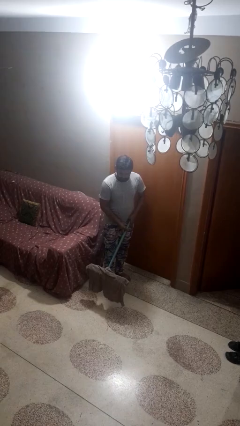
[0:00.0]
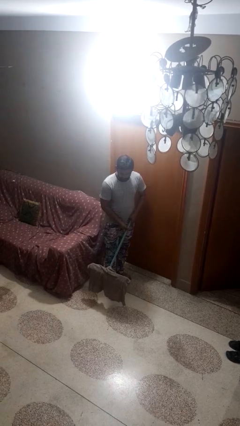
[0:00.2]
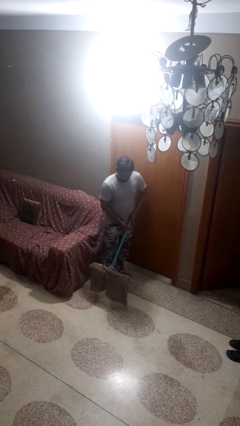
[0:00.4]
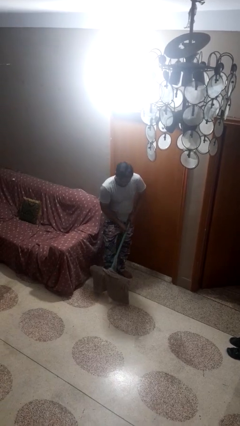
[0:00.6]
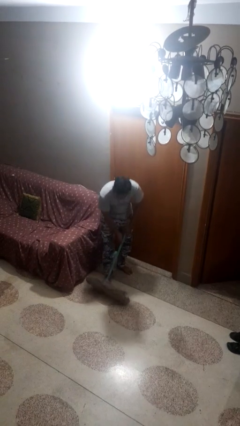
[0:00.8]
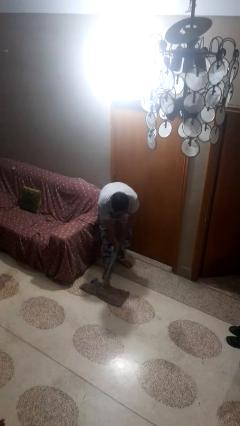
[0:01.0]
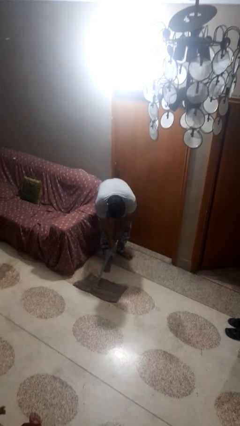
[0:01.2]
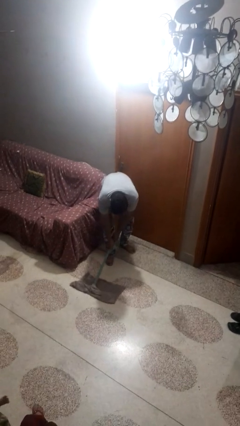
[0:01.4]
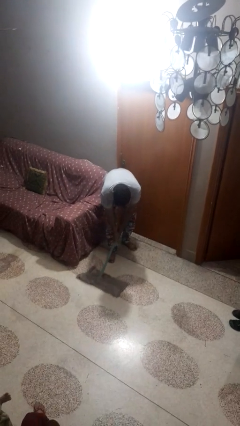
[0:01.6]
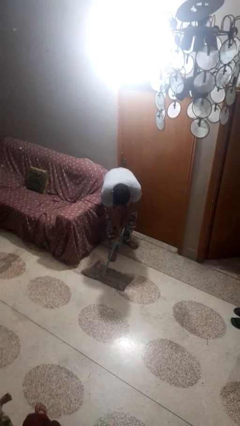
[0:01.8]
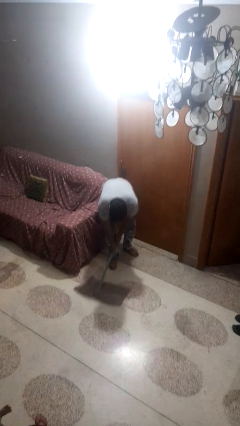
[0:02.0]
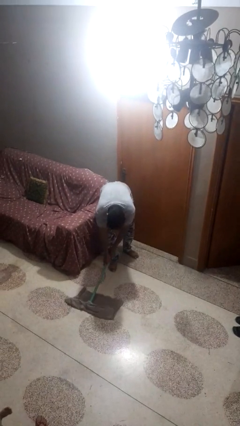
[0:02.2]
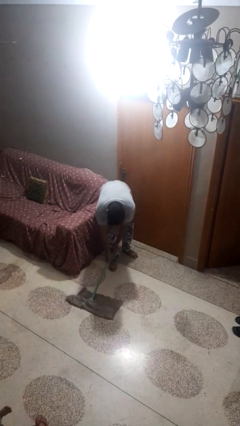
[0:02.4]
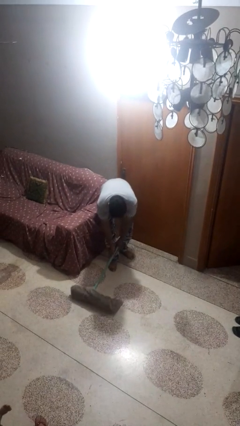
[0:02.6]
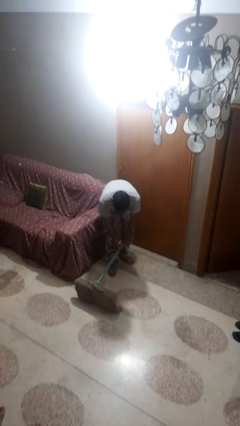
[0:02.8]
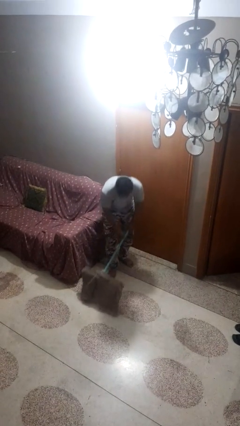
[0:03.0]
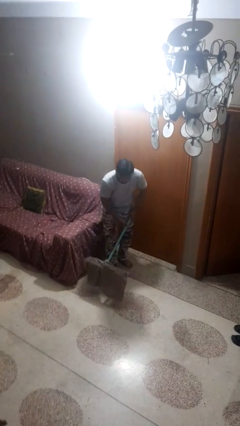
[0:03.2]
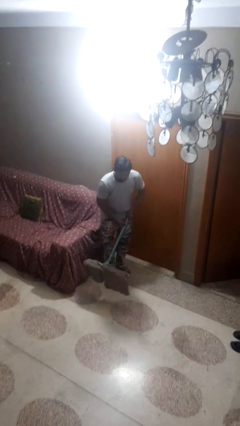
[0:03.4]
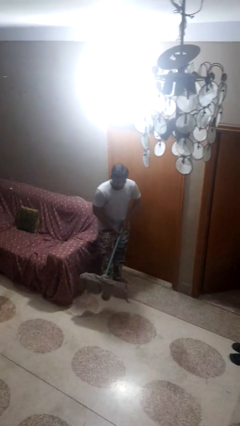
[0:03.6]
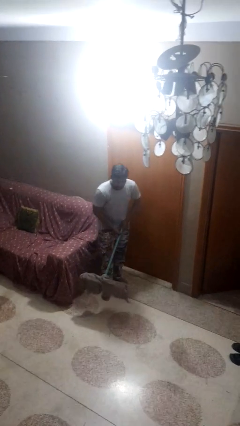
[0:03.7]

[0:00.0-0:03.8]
person mops

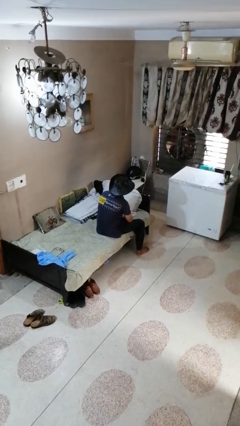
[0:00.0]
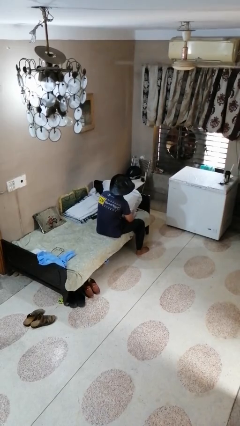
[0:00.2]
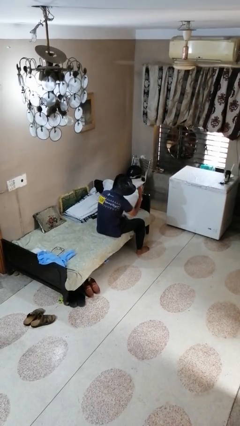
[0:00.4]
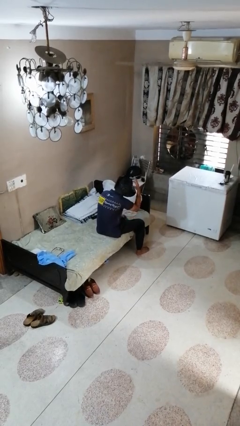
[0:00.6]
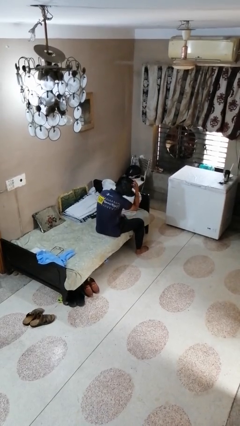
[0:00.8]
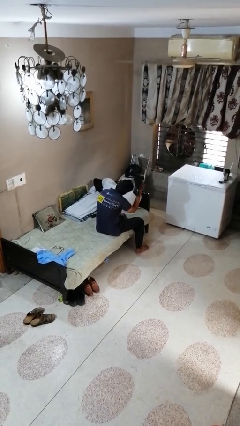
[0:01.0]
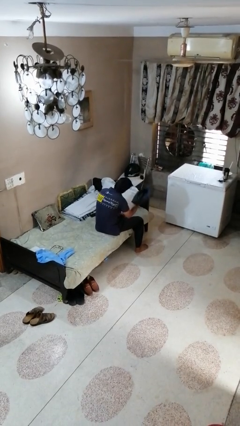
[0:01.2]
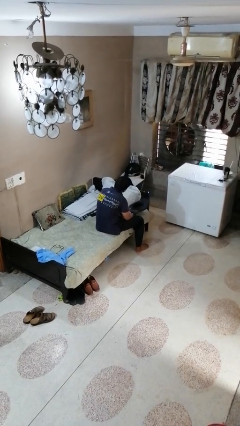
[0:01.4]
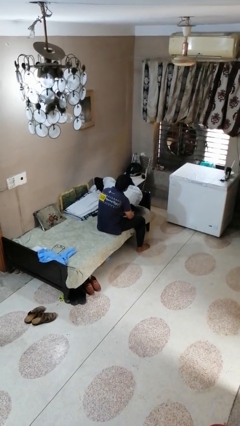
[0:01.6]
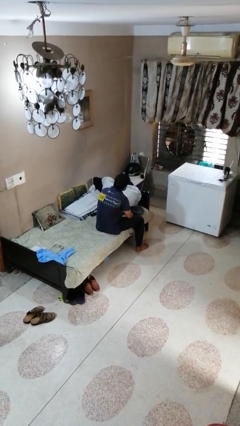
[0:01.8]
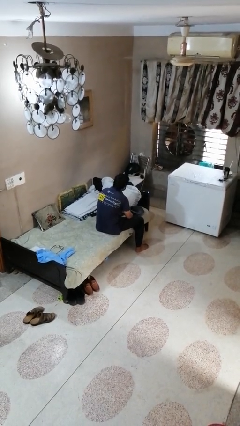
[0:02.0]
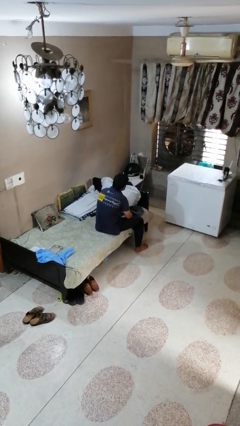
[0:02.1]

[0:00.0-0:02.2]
person takes off hat

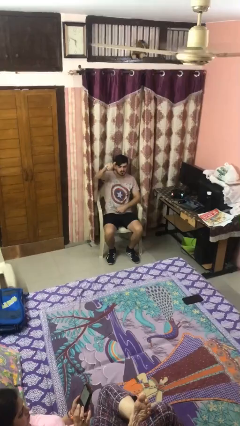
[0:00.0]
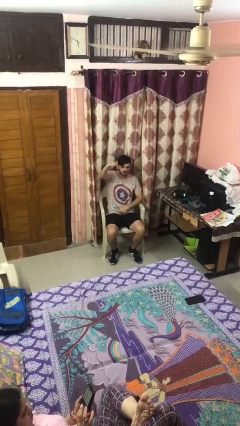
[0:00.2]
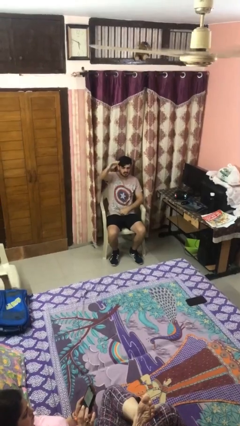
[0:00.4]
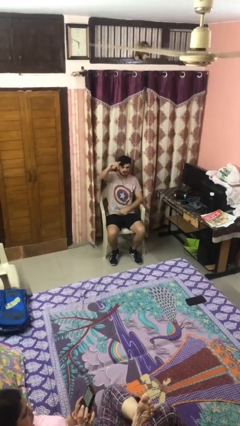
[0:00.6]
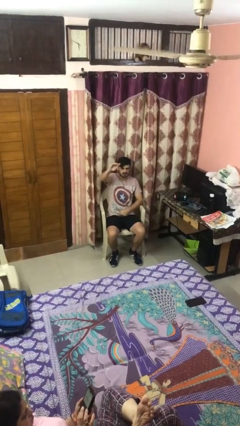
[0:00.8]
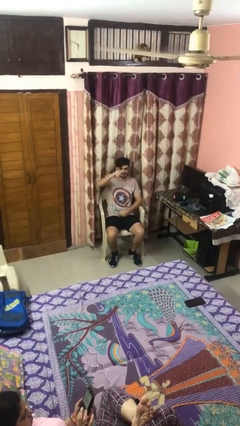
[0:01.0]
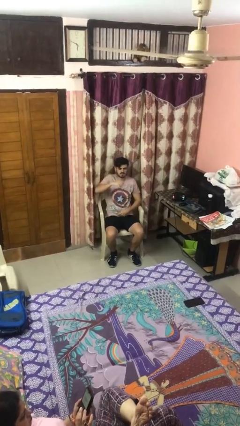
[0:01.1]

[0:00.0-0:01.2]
person gestures come here

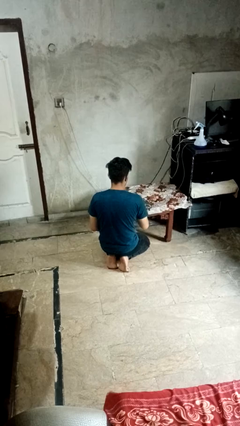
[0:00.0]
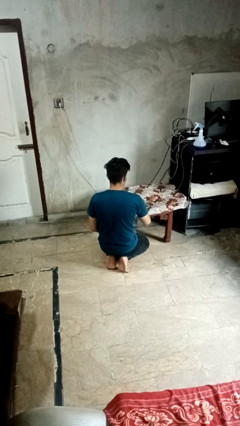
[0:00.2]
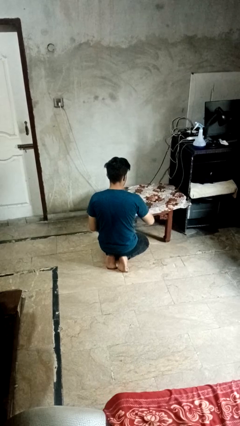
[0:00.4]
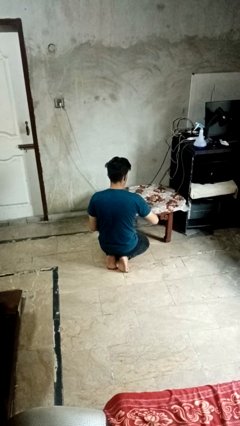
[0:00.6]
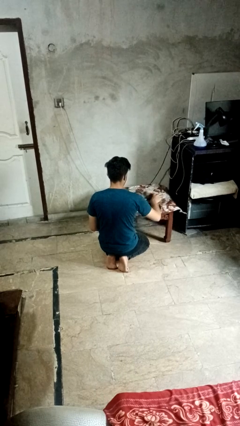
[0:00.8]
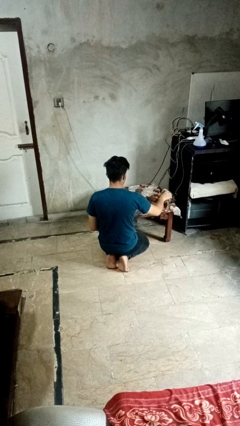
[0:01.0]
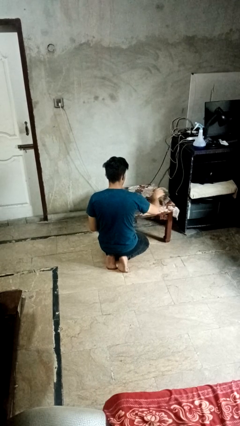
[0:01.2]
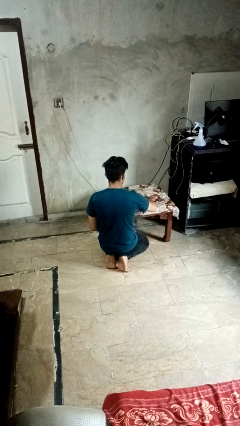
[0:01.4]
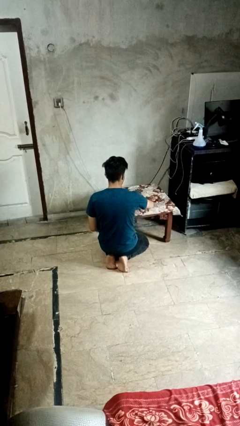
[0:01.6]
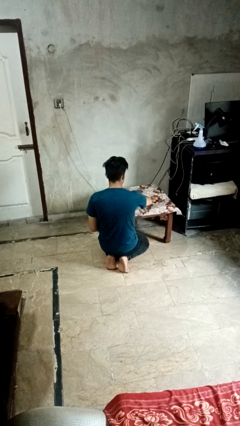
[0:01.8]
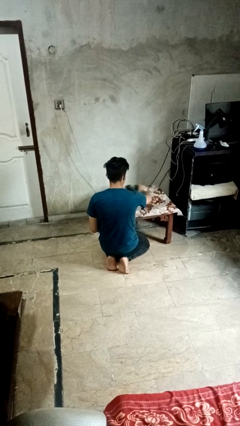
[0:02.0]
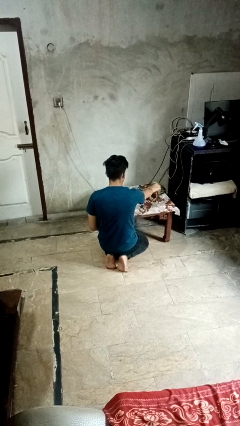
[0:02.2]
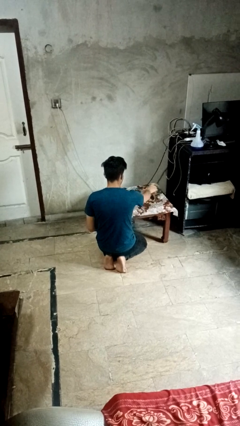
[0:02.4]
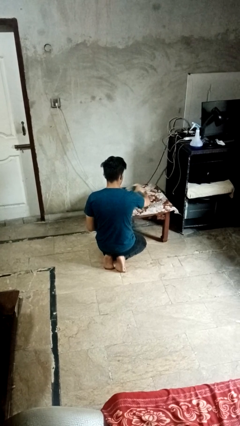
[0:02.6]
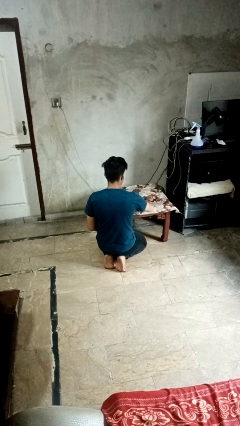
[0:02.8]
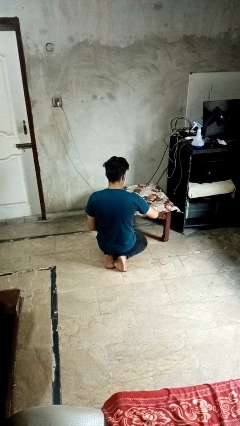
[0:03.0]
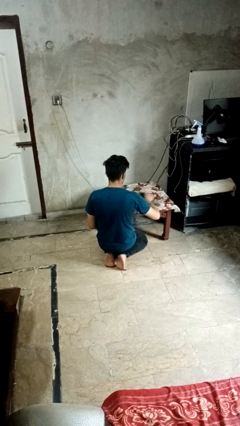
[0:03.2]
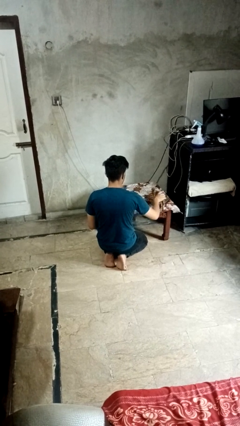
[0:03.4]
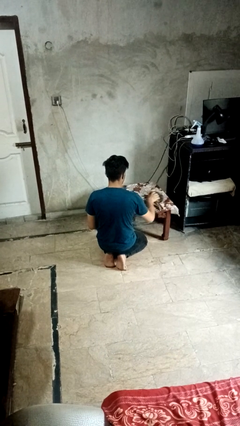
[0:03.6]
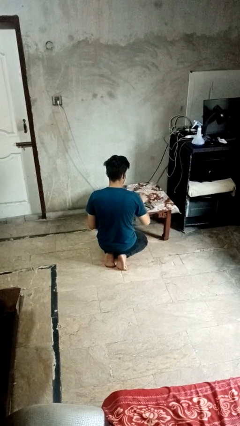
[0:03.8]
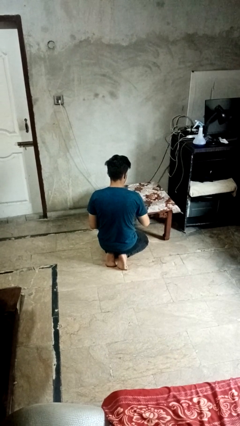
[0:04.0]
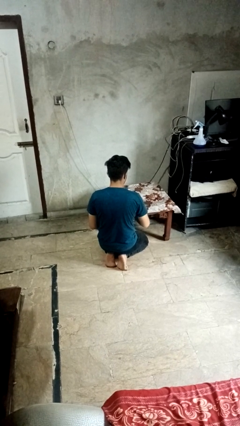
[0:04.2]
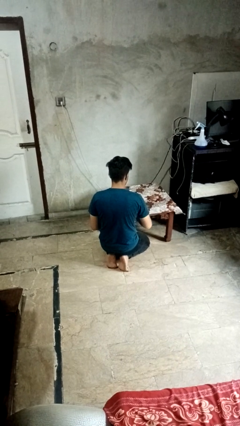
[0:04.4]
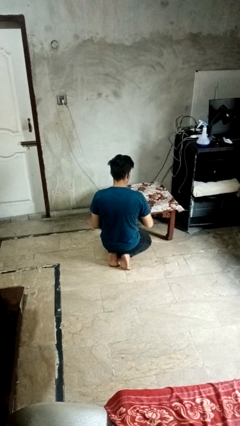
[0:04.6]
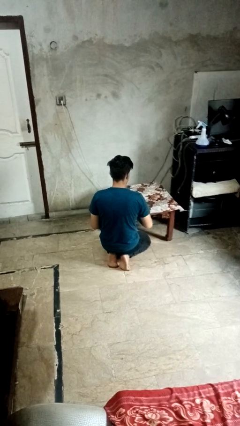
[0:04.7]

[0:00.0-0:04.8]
person cleans table with rag

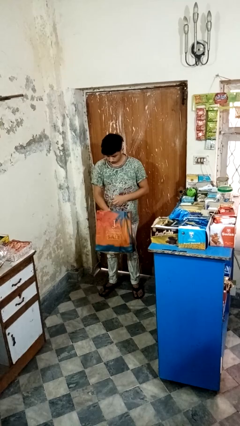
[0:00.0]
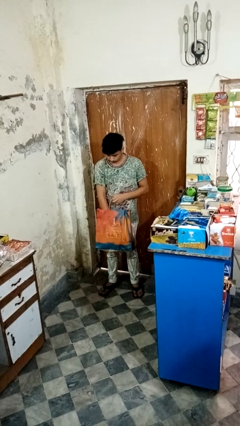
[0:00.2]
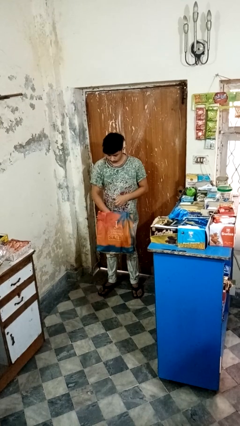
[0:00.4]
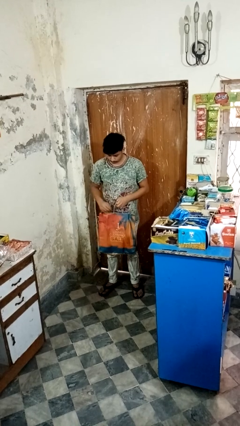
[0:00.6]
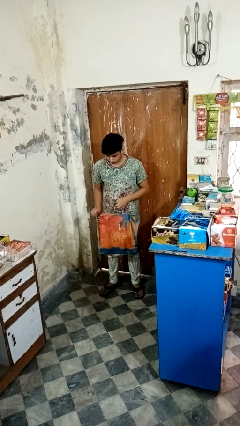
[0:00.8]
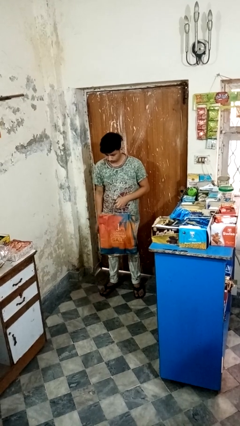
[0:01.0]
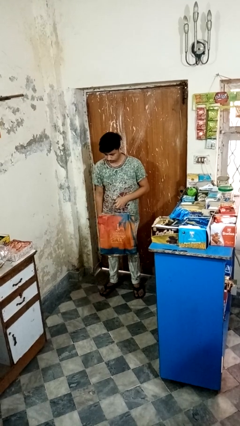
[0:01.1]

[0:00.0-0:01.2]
person puts object into bag

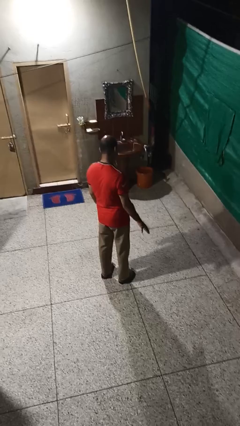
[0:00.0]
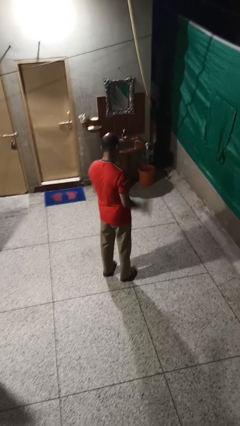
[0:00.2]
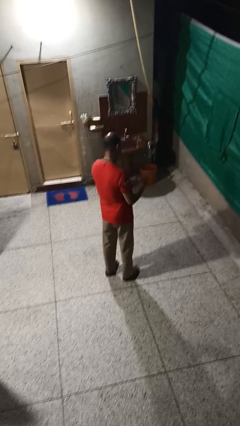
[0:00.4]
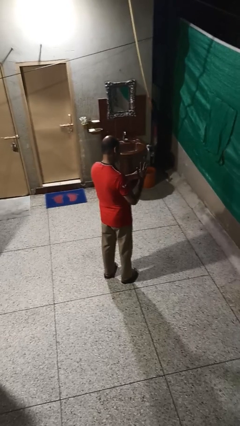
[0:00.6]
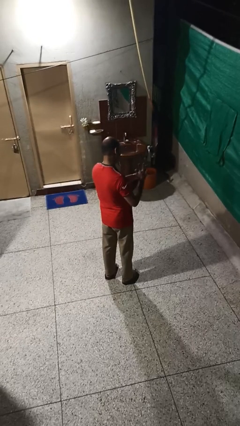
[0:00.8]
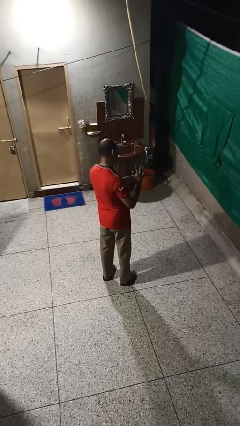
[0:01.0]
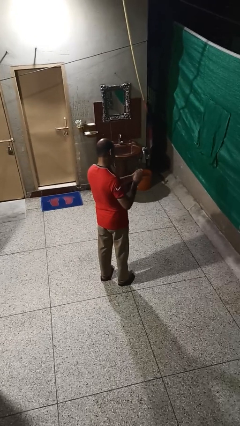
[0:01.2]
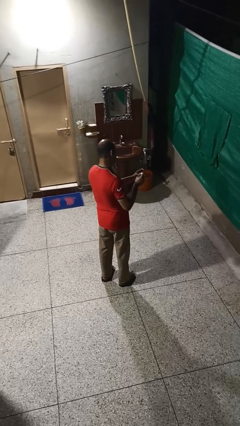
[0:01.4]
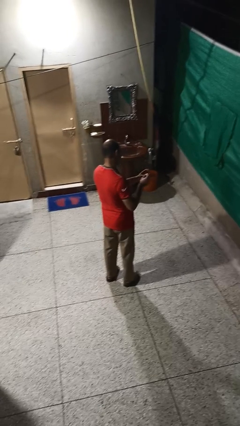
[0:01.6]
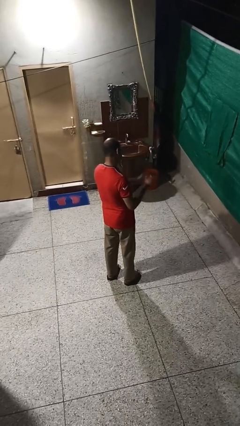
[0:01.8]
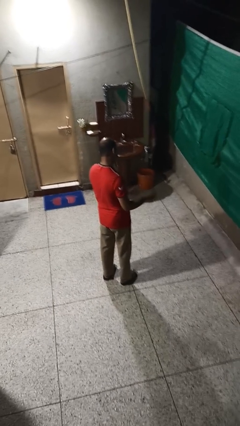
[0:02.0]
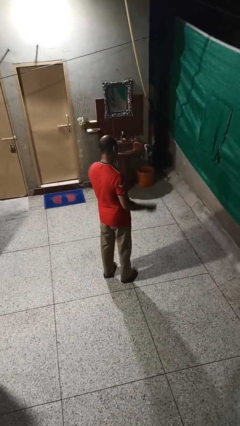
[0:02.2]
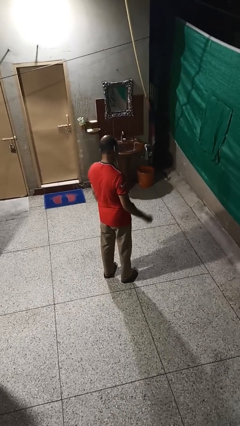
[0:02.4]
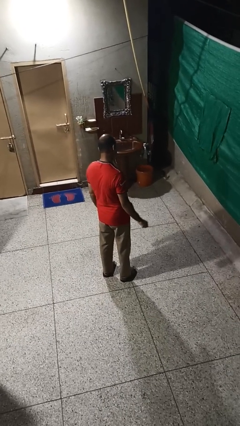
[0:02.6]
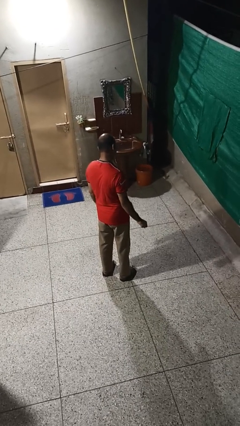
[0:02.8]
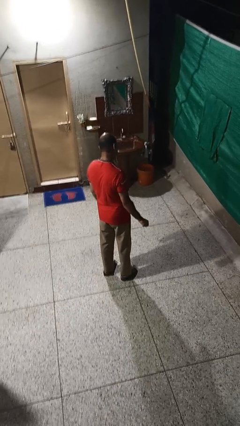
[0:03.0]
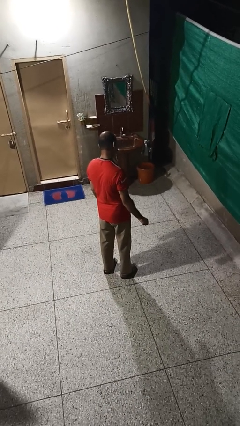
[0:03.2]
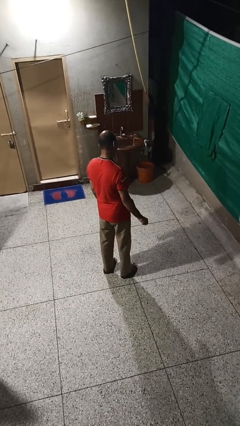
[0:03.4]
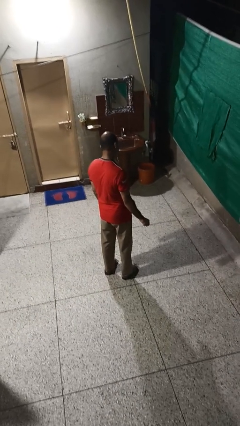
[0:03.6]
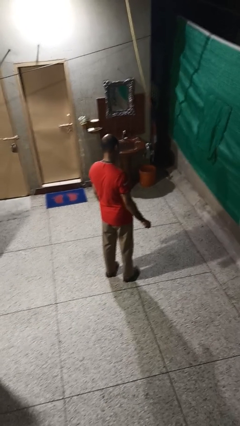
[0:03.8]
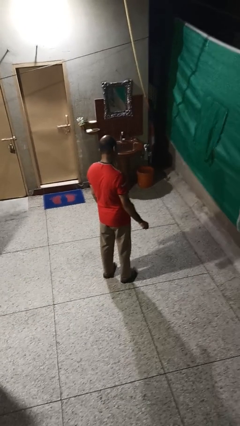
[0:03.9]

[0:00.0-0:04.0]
person takes off ring

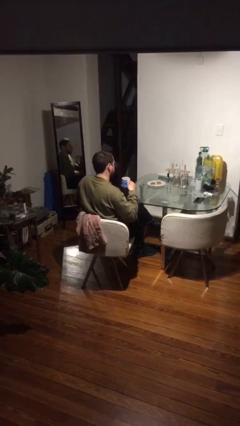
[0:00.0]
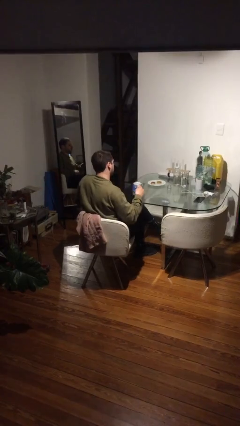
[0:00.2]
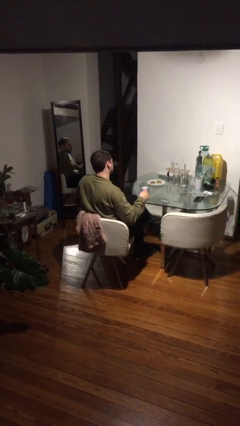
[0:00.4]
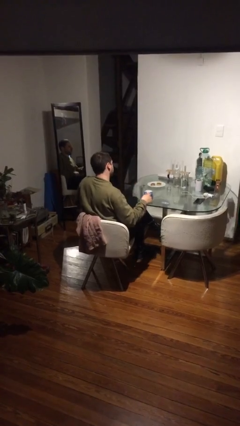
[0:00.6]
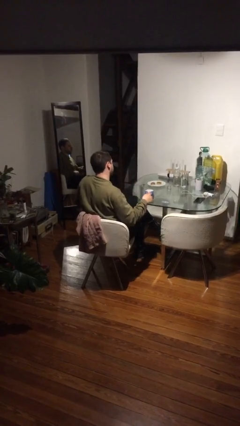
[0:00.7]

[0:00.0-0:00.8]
person puts down object on table
